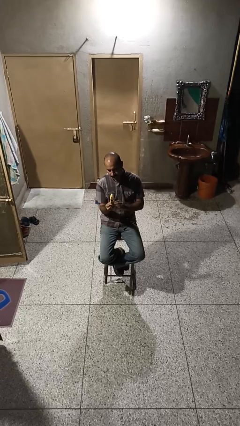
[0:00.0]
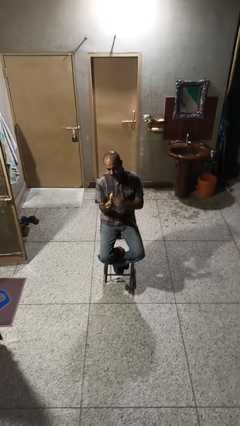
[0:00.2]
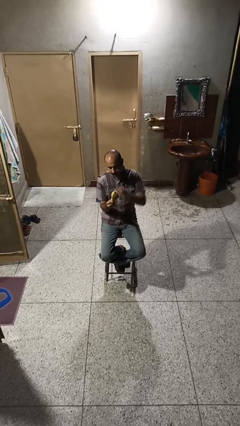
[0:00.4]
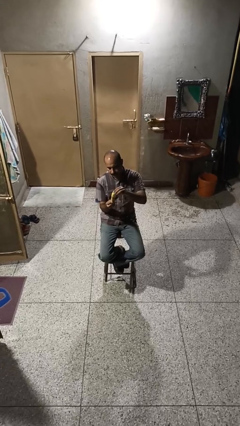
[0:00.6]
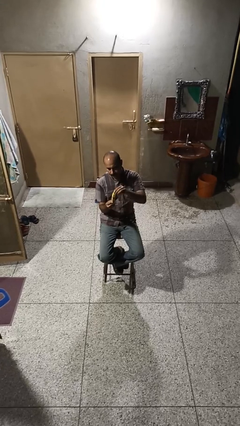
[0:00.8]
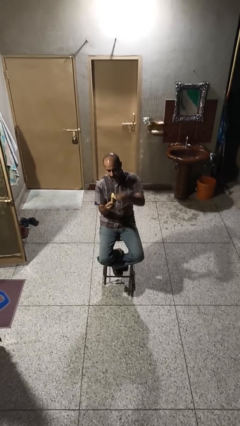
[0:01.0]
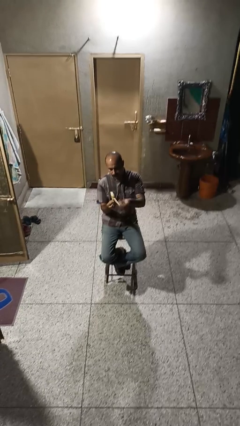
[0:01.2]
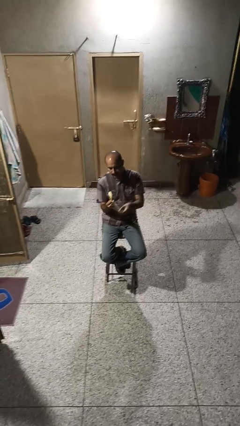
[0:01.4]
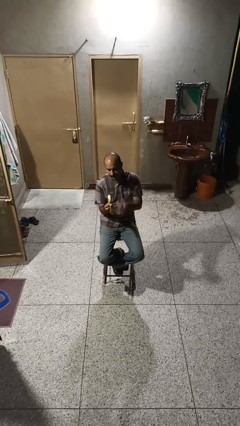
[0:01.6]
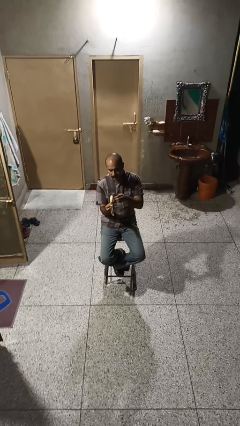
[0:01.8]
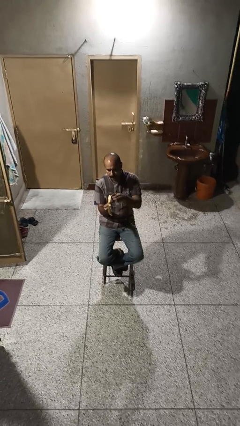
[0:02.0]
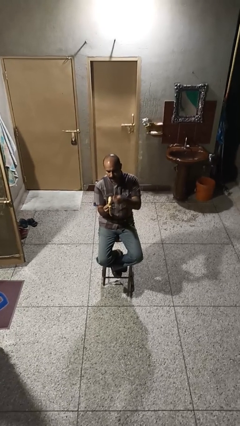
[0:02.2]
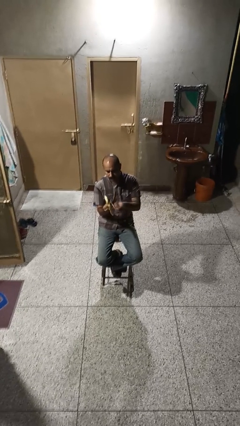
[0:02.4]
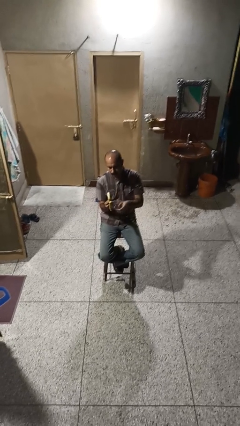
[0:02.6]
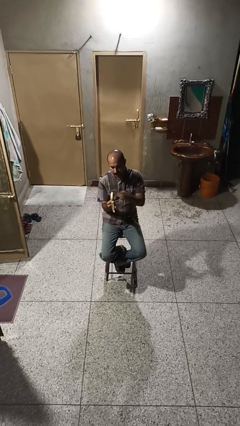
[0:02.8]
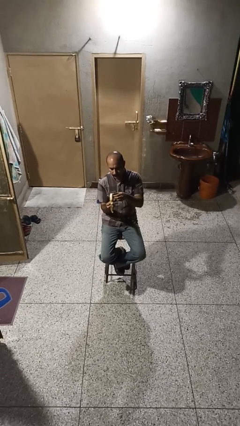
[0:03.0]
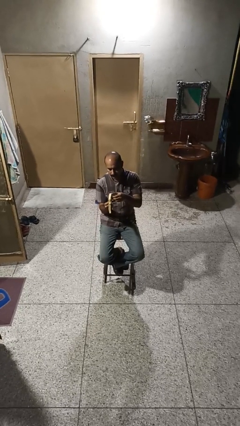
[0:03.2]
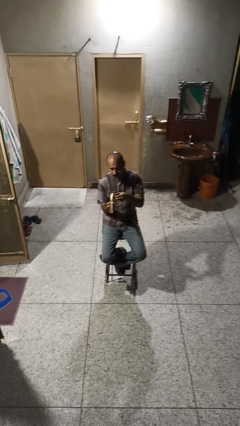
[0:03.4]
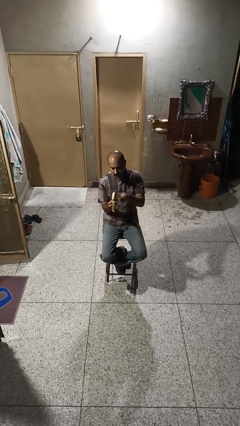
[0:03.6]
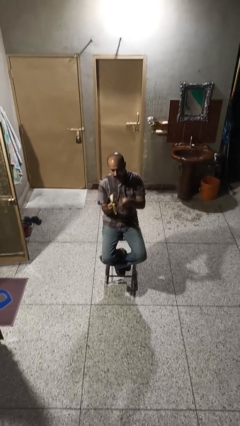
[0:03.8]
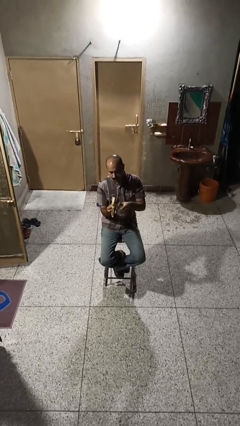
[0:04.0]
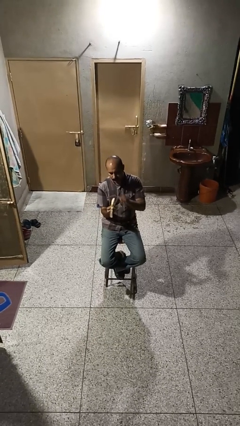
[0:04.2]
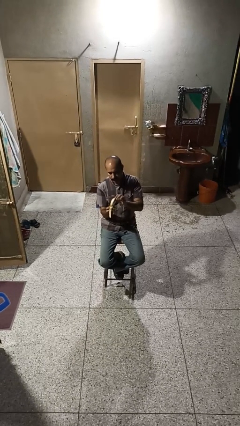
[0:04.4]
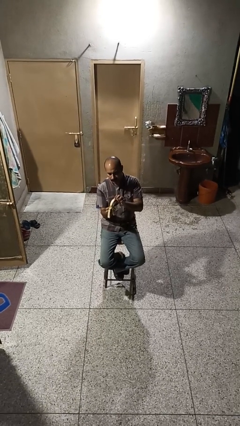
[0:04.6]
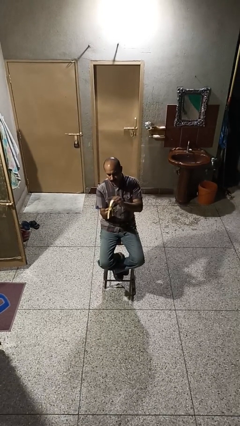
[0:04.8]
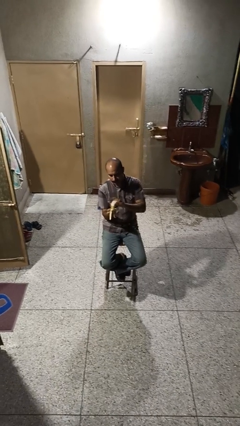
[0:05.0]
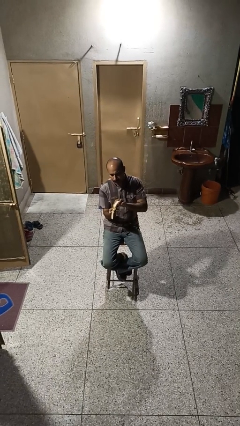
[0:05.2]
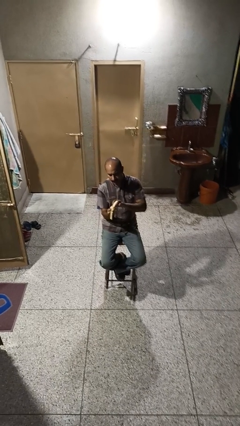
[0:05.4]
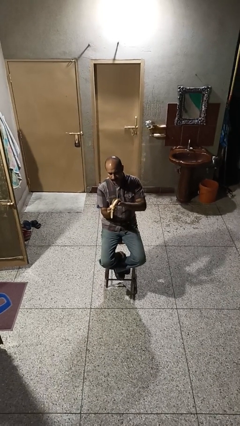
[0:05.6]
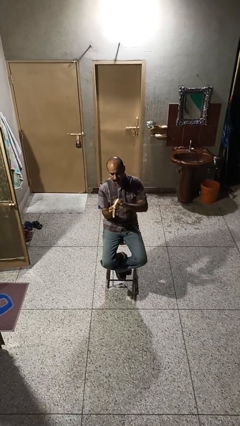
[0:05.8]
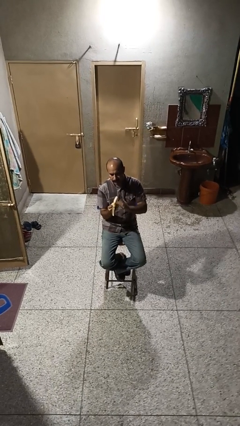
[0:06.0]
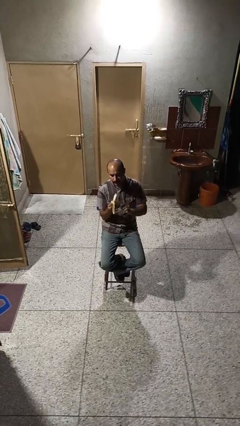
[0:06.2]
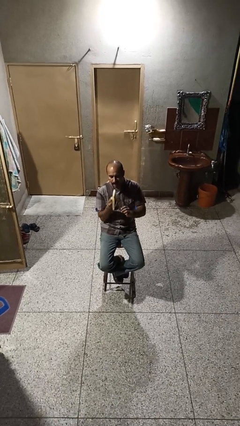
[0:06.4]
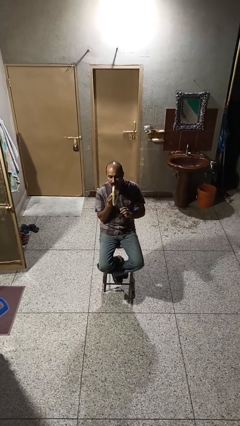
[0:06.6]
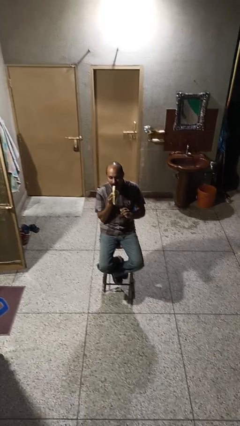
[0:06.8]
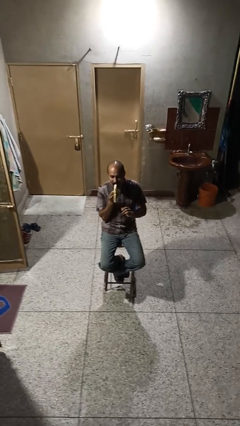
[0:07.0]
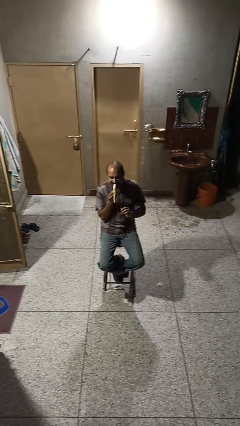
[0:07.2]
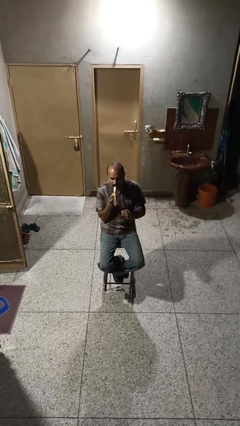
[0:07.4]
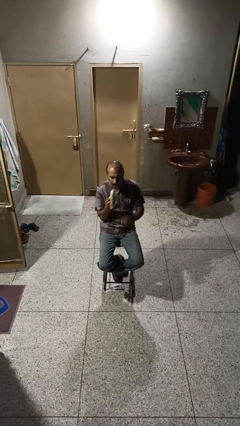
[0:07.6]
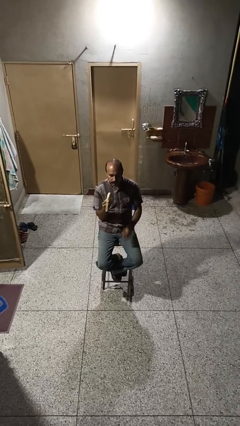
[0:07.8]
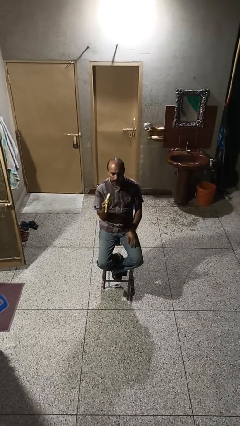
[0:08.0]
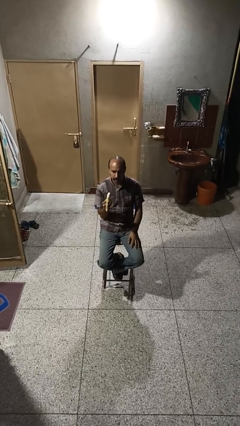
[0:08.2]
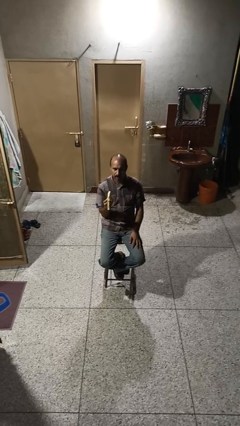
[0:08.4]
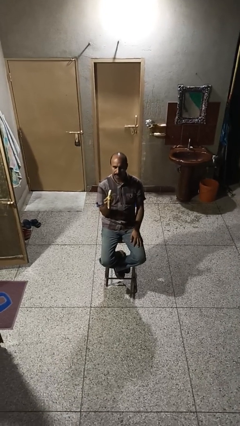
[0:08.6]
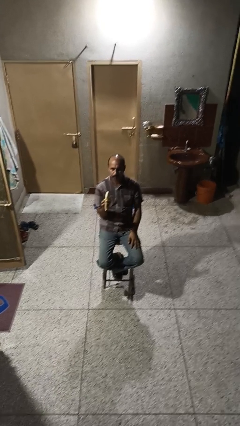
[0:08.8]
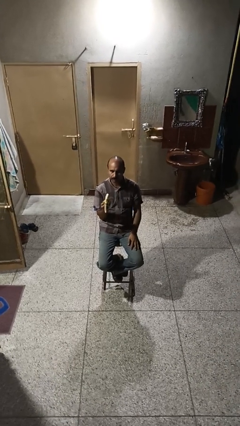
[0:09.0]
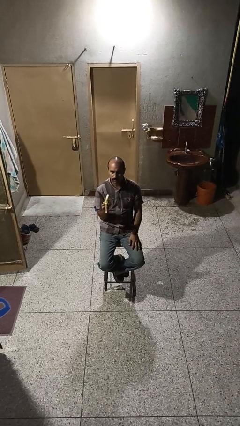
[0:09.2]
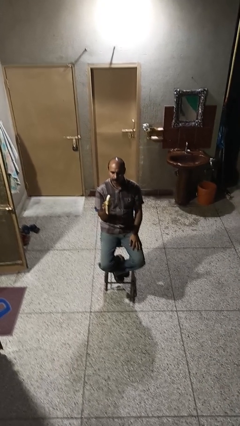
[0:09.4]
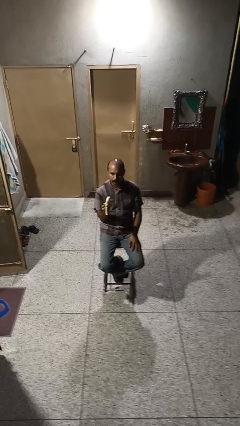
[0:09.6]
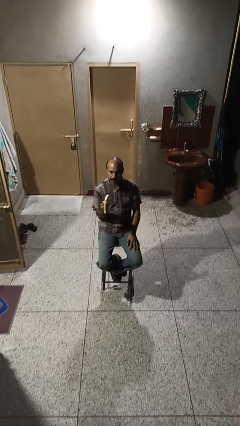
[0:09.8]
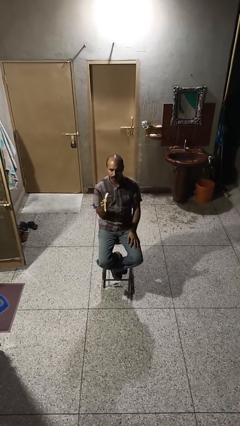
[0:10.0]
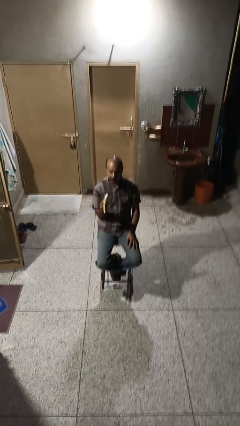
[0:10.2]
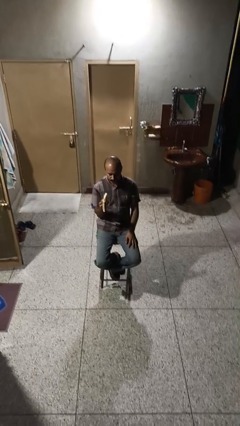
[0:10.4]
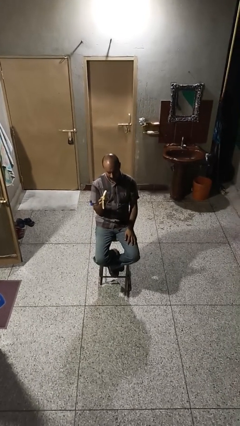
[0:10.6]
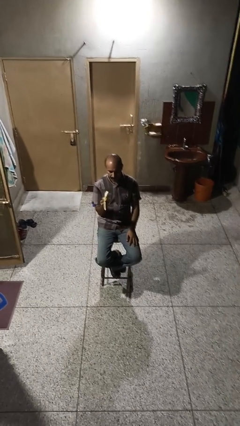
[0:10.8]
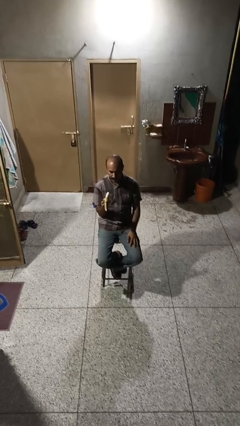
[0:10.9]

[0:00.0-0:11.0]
person eats banana

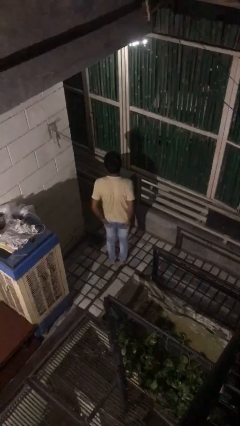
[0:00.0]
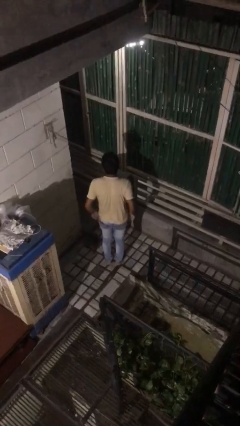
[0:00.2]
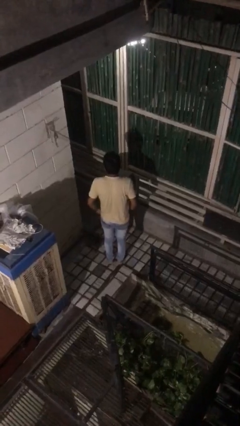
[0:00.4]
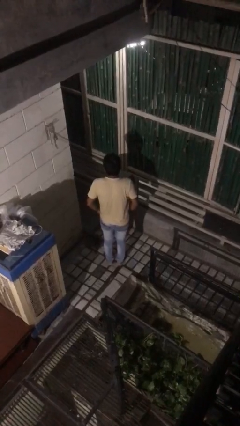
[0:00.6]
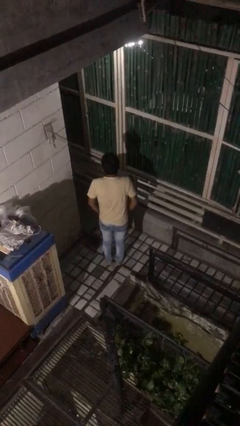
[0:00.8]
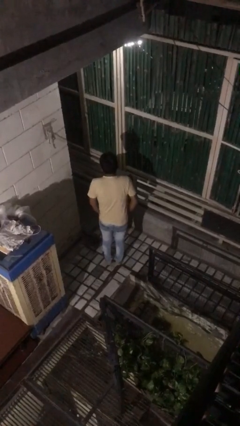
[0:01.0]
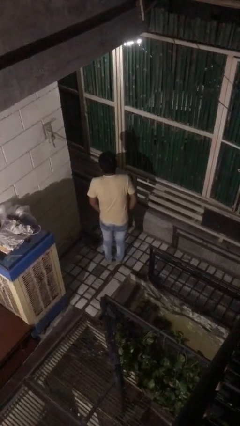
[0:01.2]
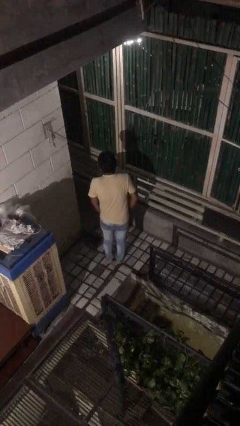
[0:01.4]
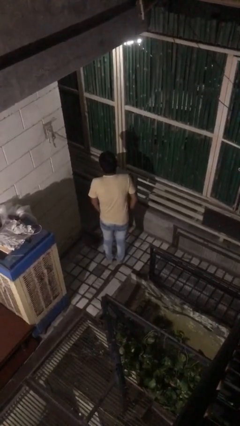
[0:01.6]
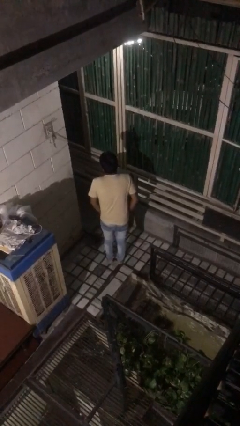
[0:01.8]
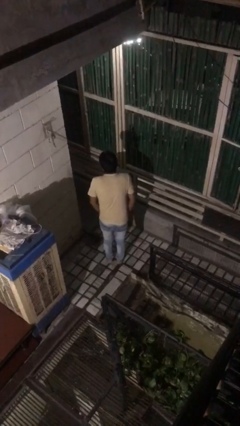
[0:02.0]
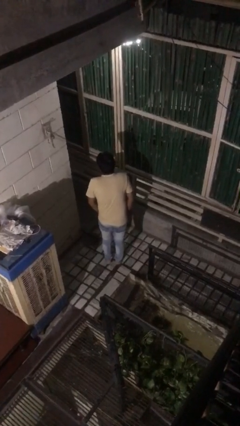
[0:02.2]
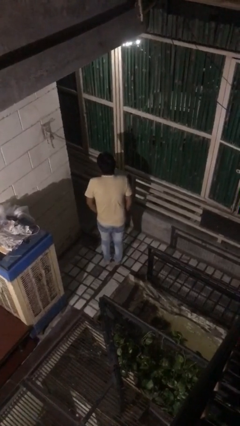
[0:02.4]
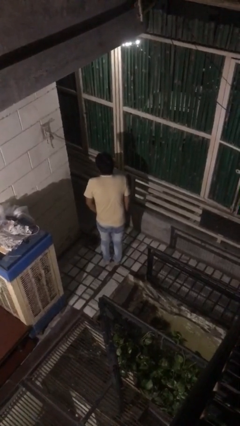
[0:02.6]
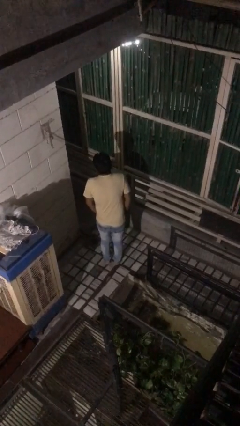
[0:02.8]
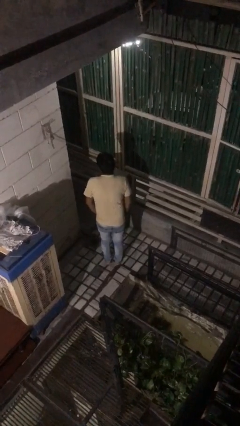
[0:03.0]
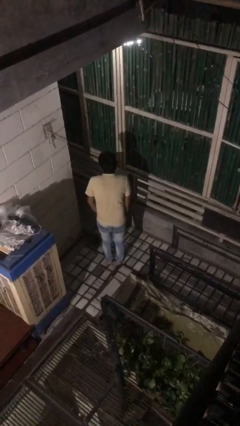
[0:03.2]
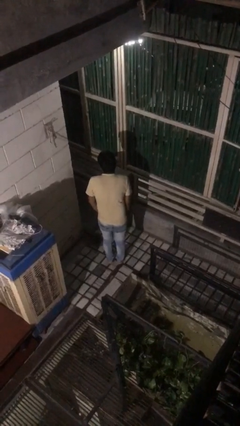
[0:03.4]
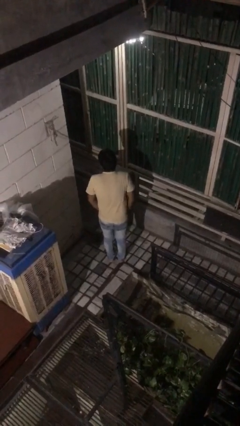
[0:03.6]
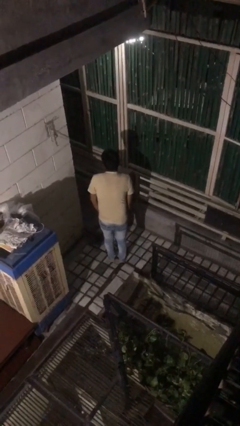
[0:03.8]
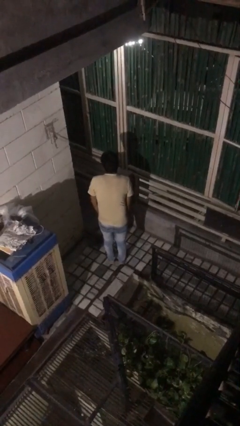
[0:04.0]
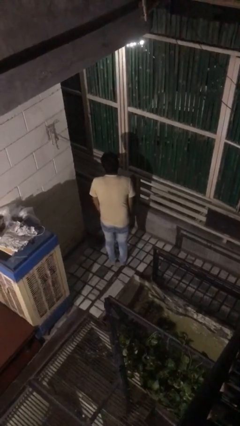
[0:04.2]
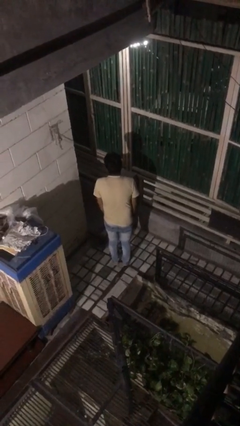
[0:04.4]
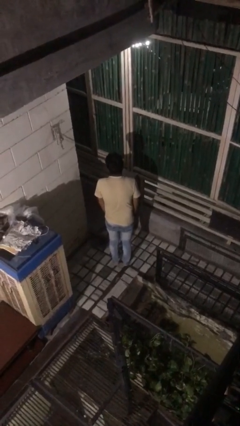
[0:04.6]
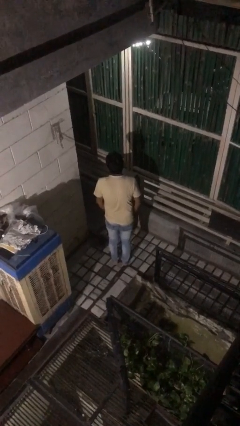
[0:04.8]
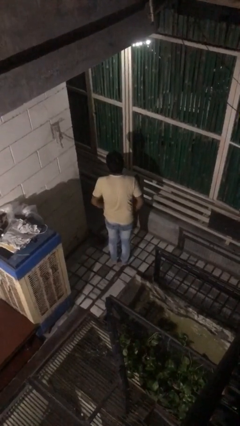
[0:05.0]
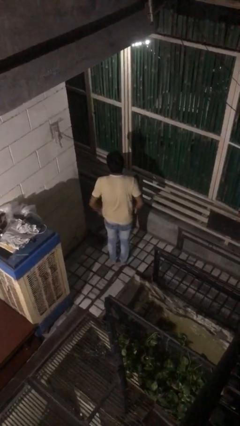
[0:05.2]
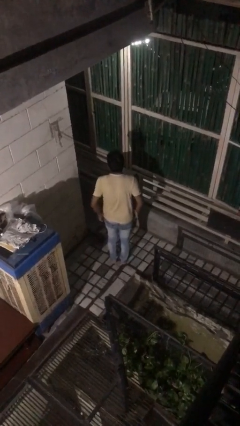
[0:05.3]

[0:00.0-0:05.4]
person puts hands in back pockets

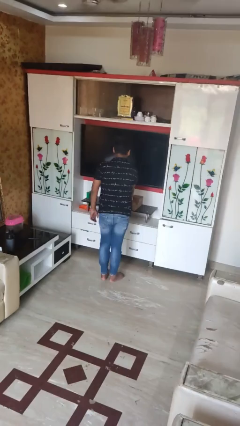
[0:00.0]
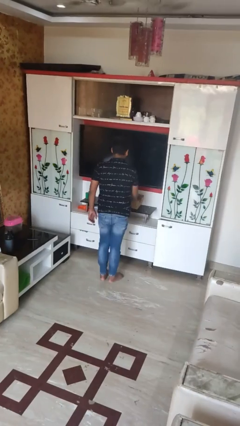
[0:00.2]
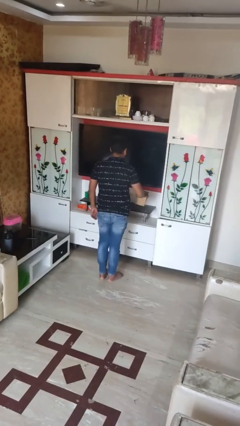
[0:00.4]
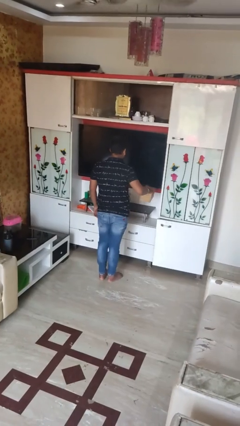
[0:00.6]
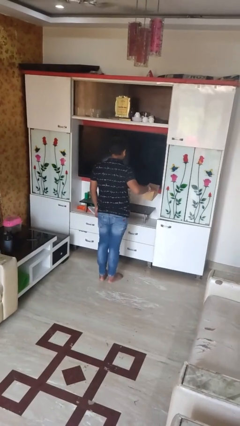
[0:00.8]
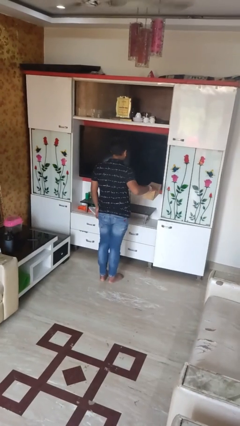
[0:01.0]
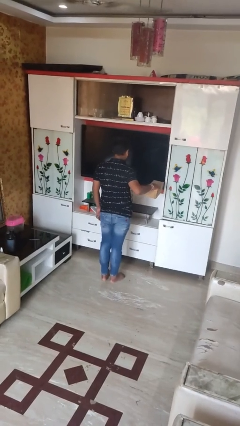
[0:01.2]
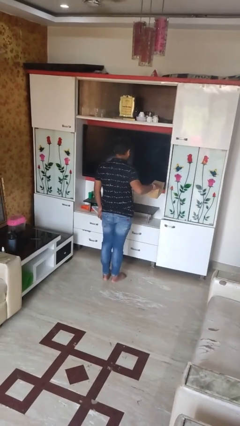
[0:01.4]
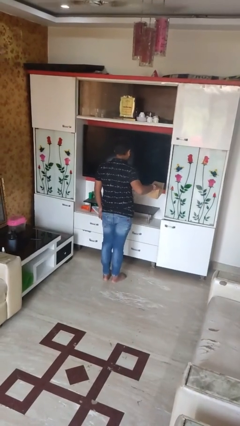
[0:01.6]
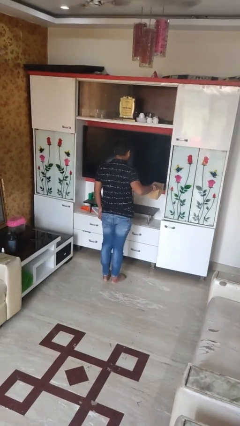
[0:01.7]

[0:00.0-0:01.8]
person picks up object from countertop
